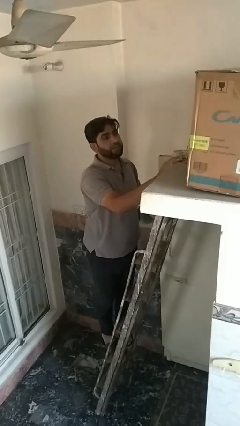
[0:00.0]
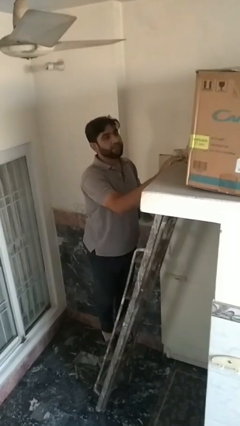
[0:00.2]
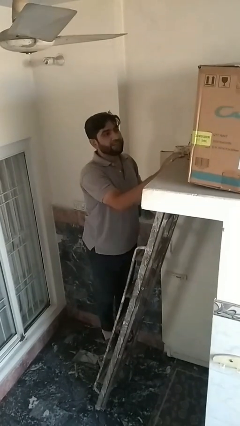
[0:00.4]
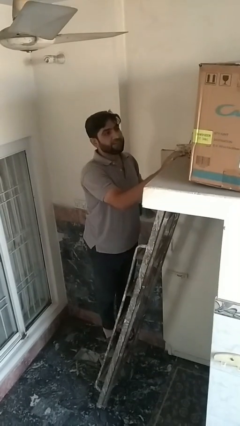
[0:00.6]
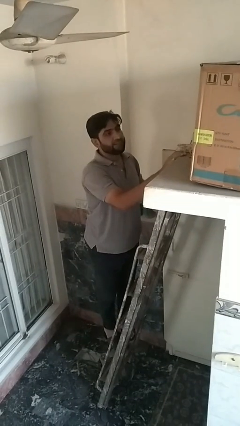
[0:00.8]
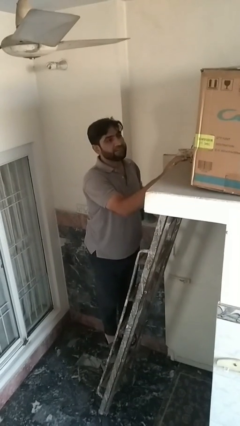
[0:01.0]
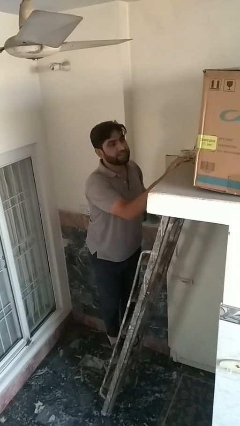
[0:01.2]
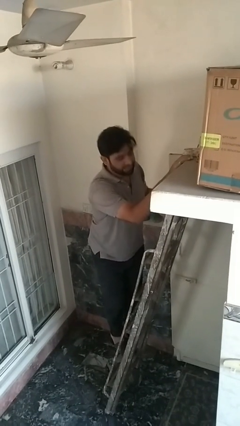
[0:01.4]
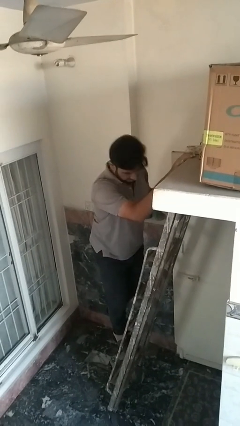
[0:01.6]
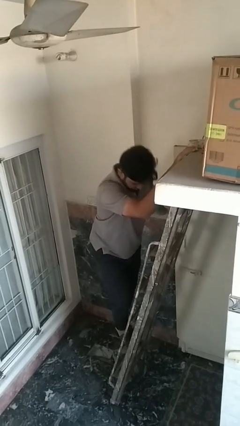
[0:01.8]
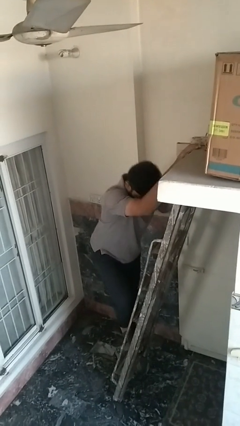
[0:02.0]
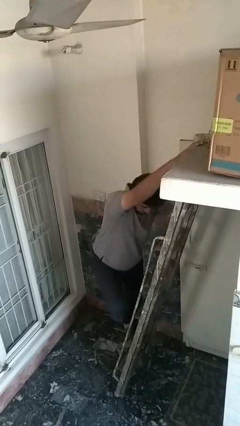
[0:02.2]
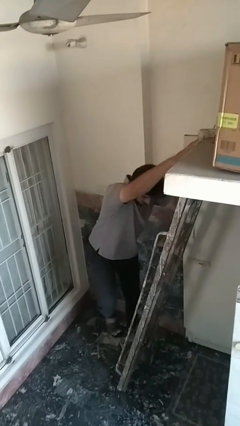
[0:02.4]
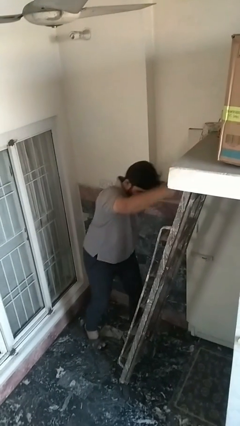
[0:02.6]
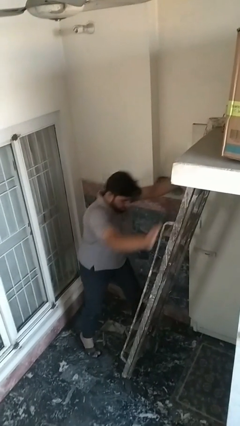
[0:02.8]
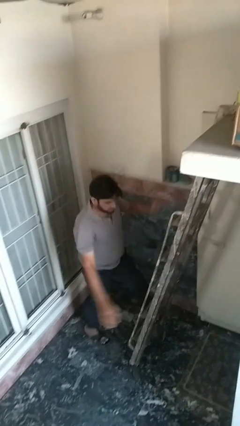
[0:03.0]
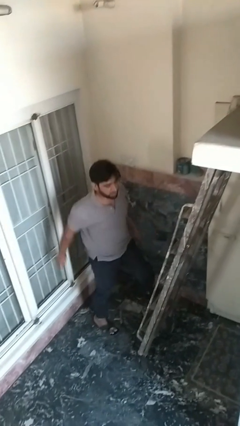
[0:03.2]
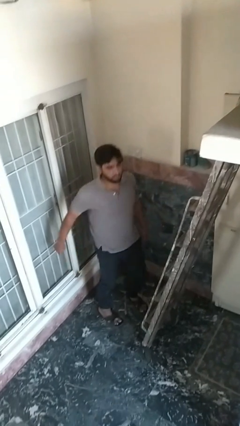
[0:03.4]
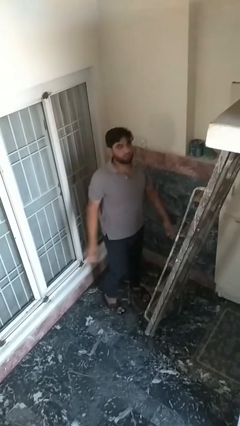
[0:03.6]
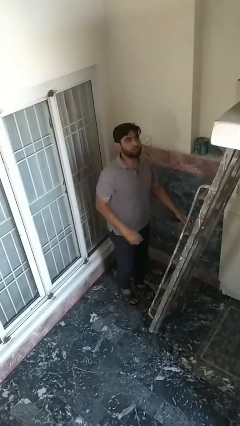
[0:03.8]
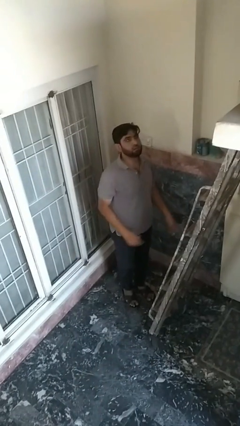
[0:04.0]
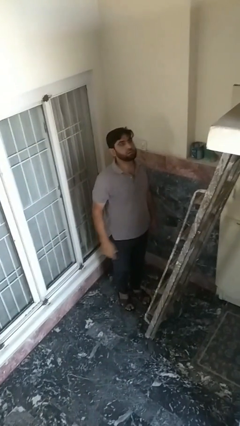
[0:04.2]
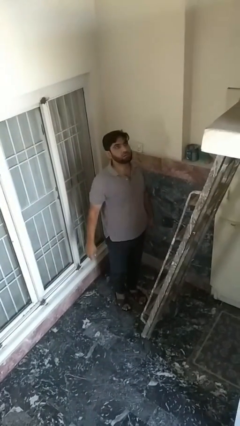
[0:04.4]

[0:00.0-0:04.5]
person climbs down ladder

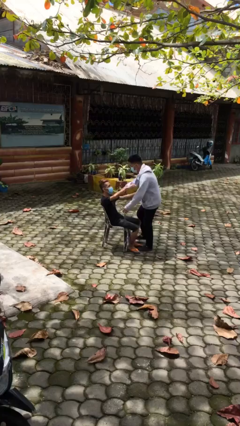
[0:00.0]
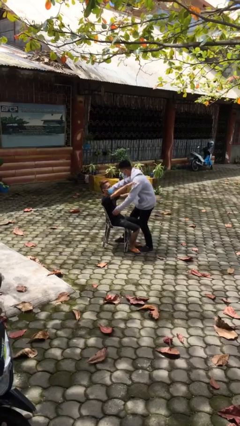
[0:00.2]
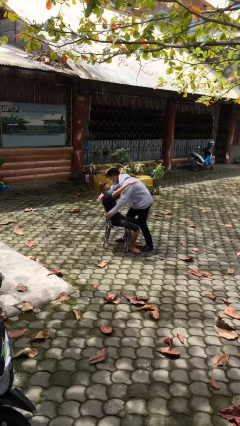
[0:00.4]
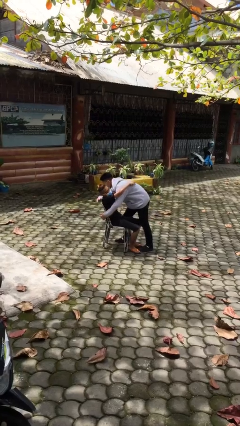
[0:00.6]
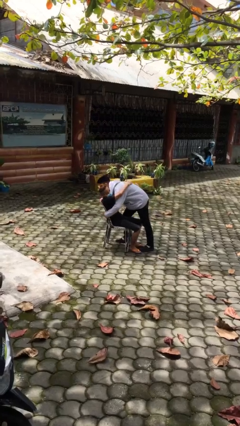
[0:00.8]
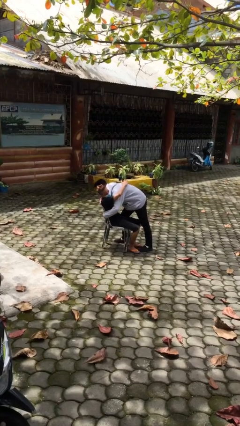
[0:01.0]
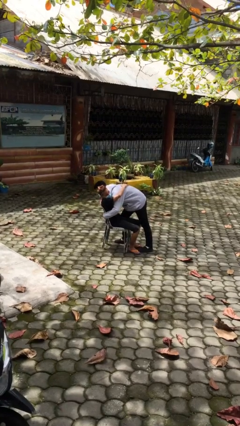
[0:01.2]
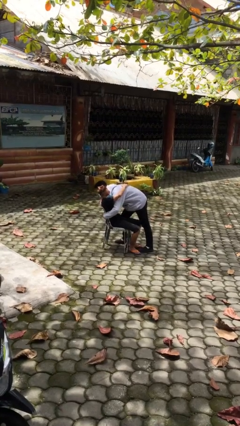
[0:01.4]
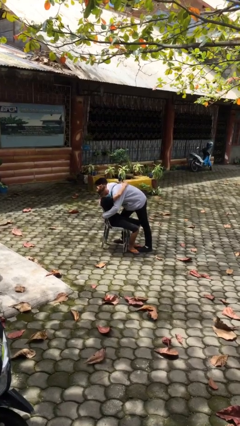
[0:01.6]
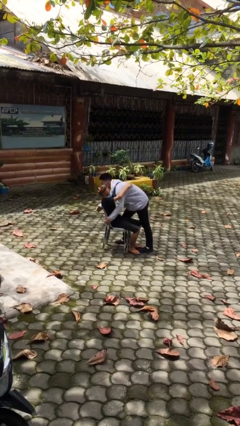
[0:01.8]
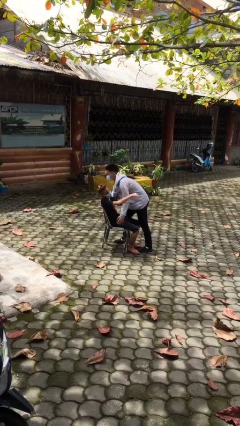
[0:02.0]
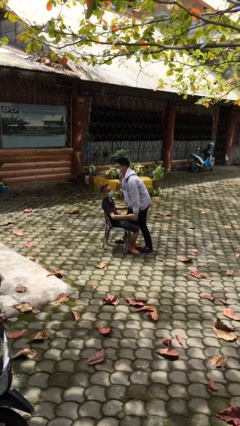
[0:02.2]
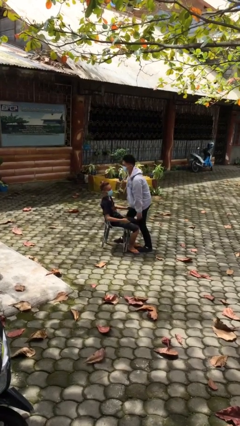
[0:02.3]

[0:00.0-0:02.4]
person embraces person

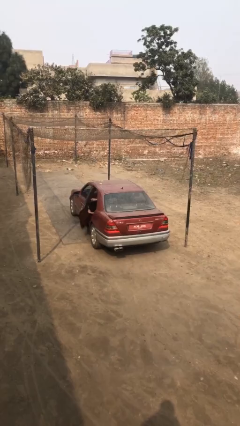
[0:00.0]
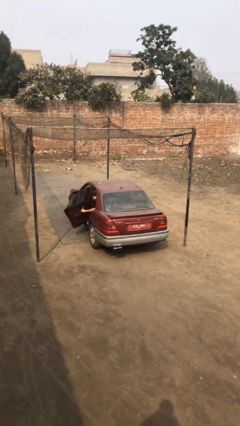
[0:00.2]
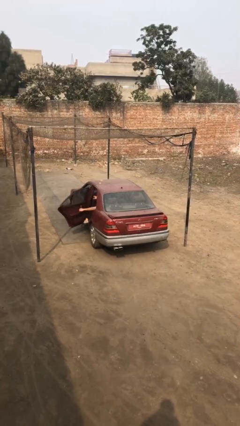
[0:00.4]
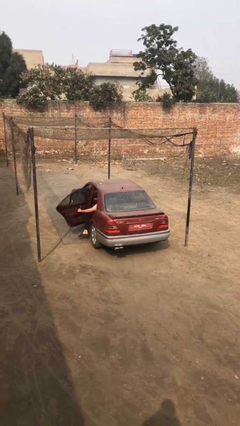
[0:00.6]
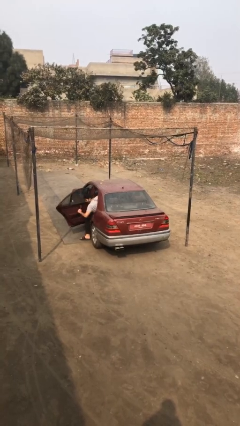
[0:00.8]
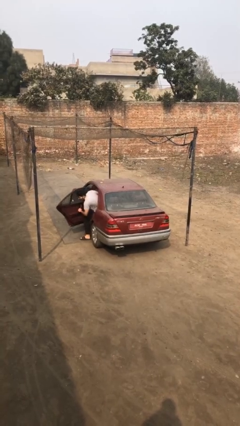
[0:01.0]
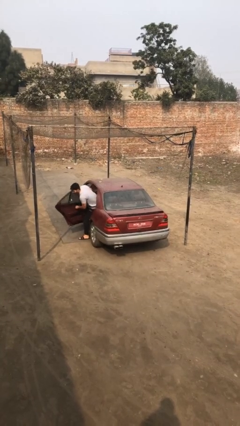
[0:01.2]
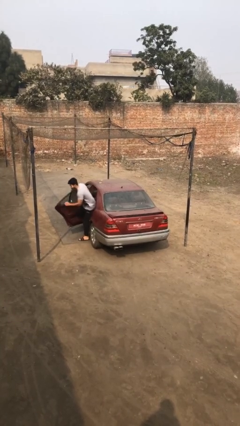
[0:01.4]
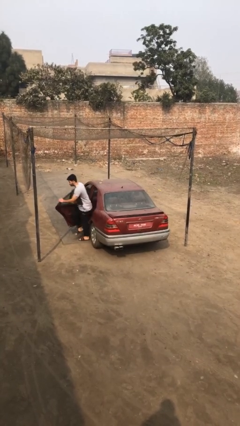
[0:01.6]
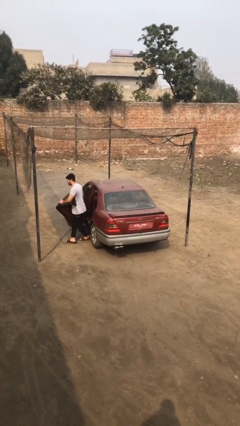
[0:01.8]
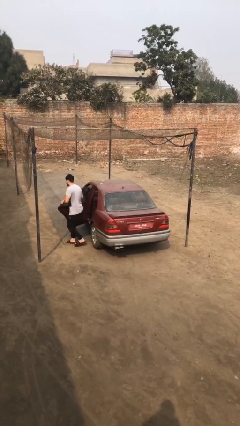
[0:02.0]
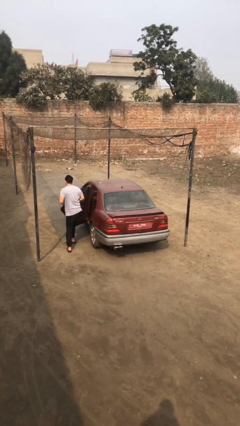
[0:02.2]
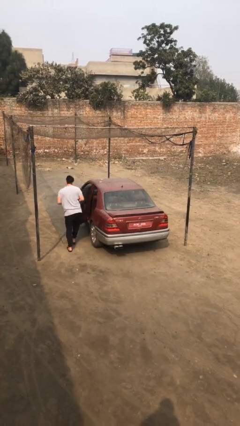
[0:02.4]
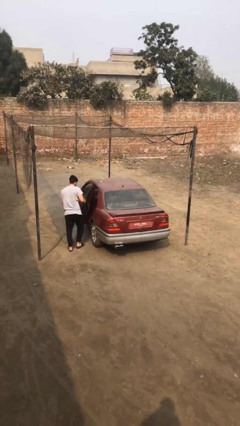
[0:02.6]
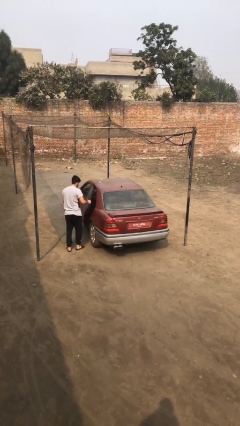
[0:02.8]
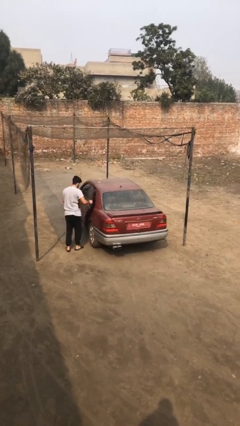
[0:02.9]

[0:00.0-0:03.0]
car drops off person

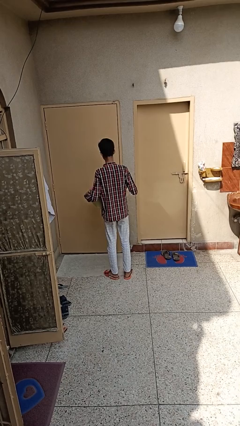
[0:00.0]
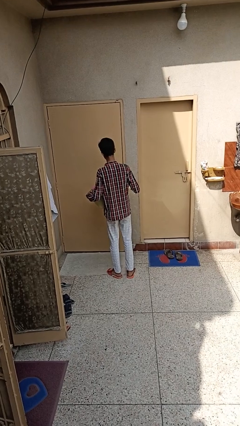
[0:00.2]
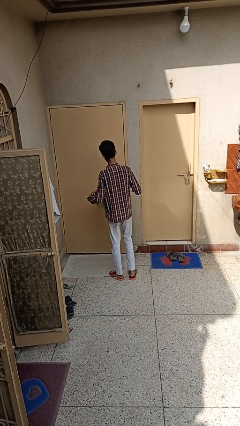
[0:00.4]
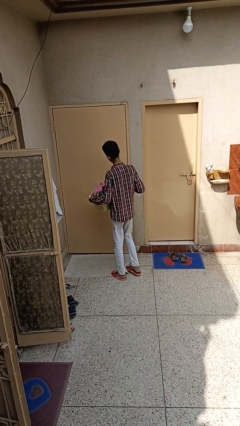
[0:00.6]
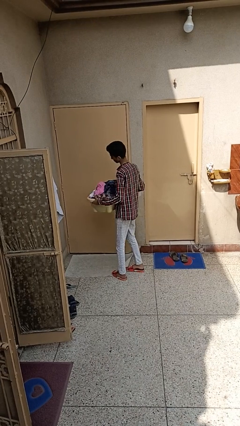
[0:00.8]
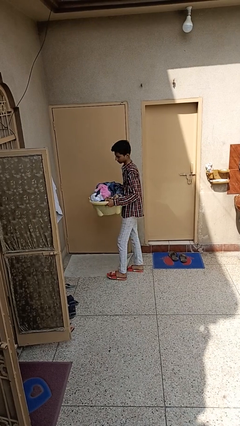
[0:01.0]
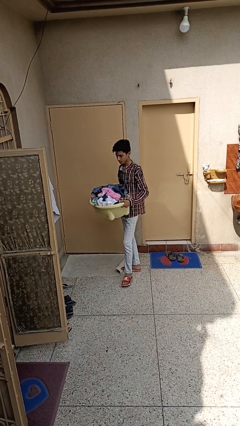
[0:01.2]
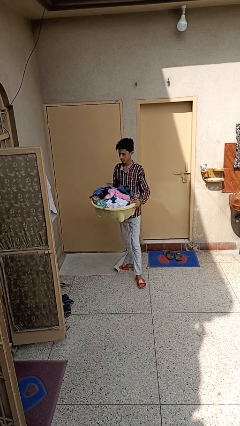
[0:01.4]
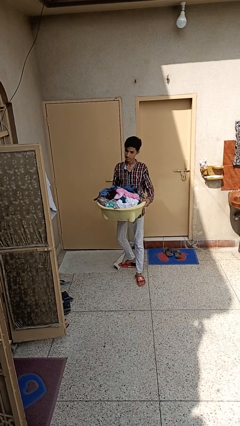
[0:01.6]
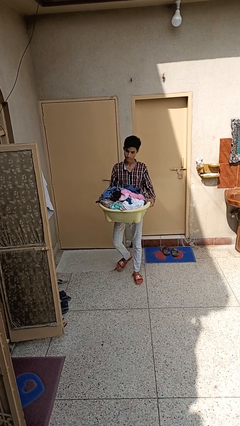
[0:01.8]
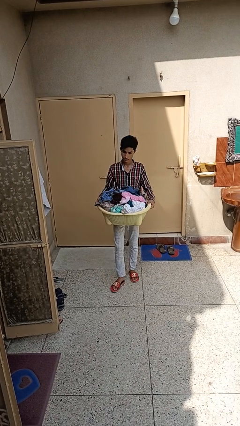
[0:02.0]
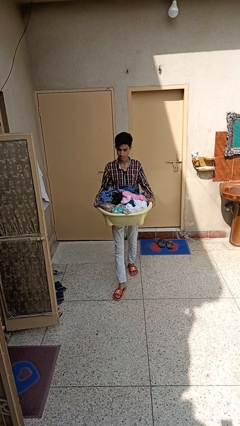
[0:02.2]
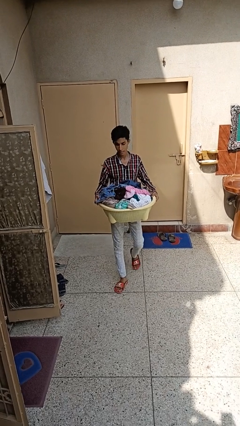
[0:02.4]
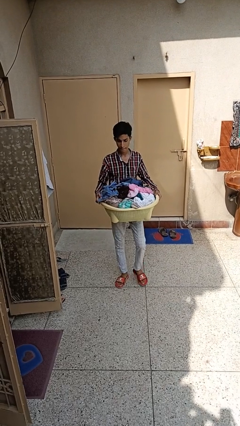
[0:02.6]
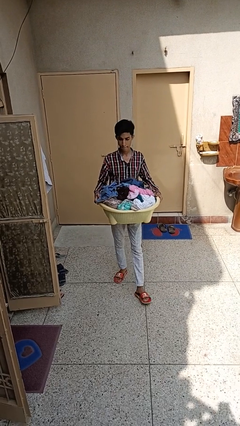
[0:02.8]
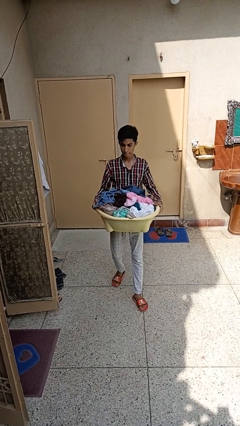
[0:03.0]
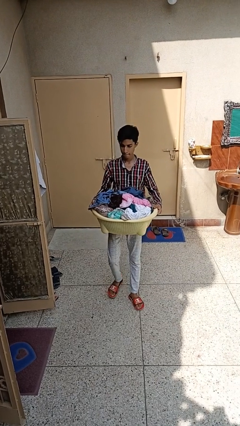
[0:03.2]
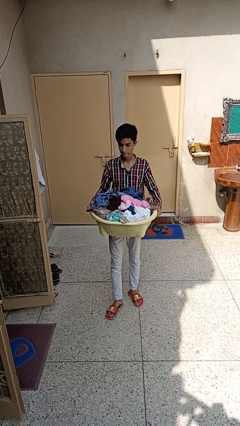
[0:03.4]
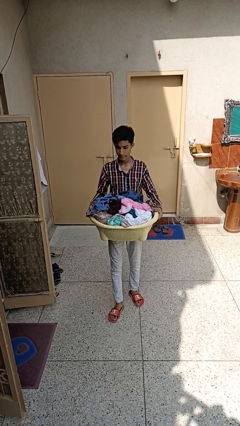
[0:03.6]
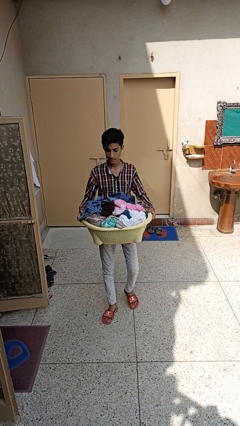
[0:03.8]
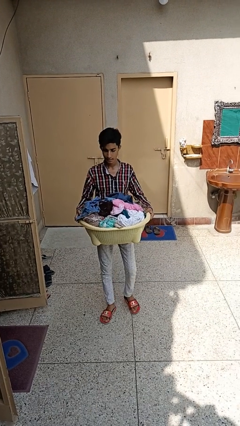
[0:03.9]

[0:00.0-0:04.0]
person carries laundry basket

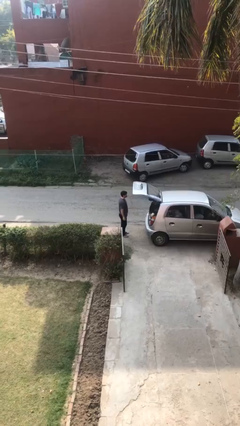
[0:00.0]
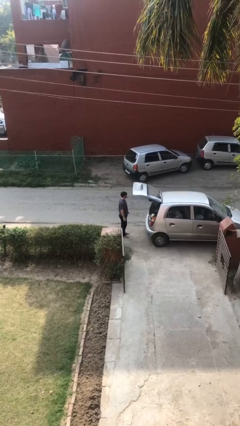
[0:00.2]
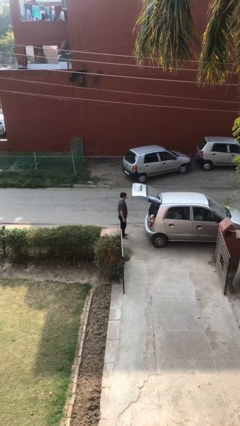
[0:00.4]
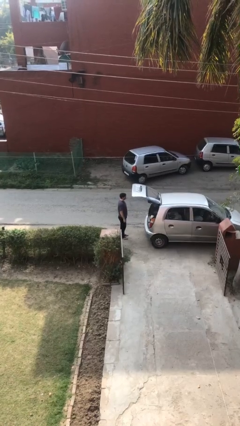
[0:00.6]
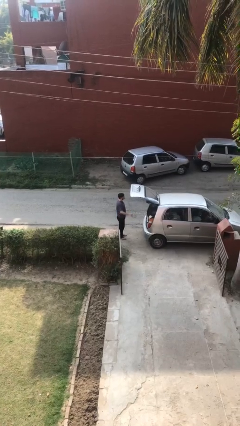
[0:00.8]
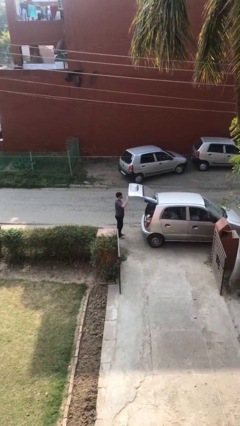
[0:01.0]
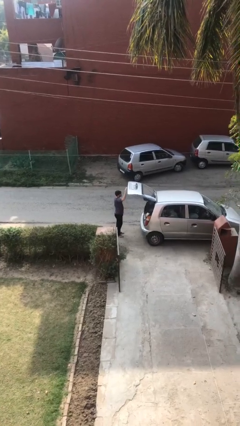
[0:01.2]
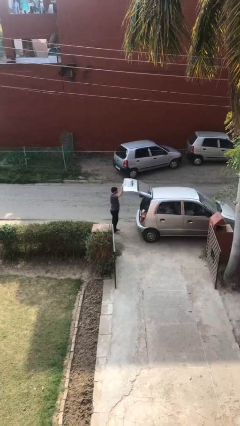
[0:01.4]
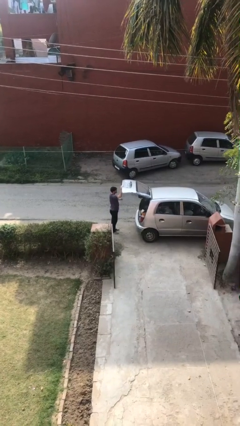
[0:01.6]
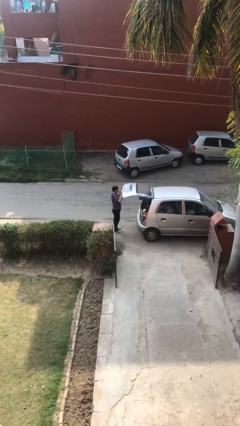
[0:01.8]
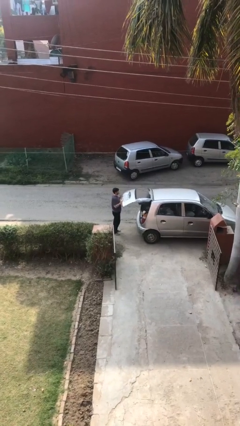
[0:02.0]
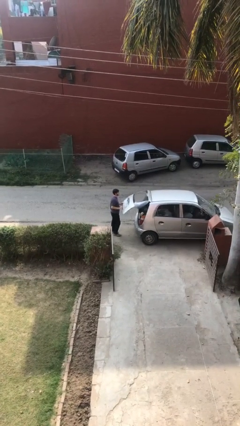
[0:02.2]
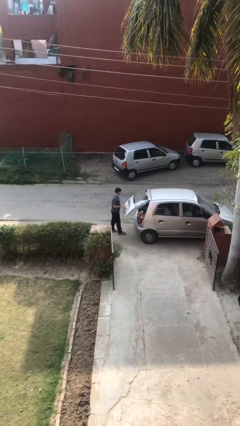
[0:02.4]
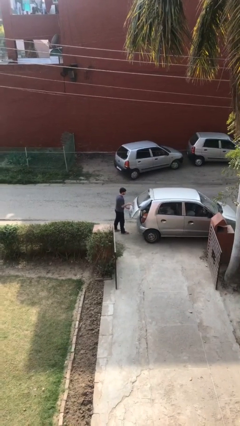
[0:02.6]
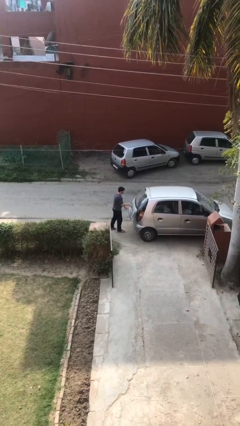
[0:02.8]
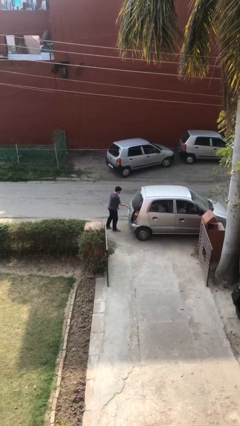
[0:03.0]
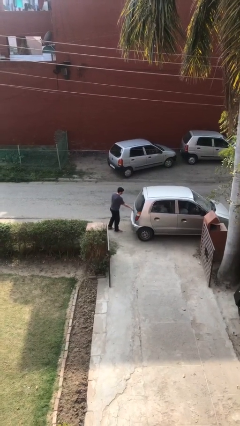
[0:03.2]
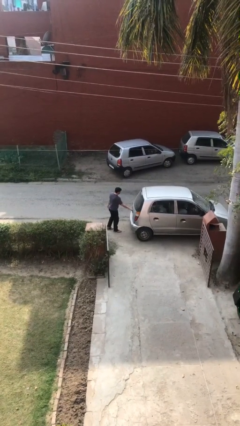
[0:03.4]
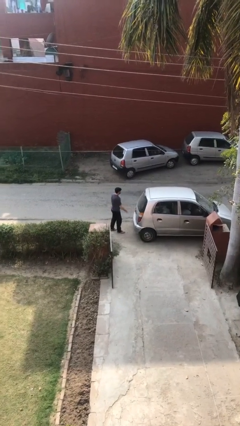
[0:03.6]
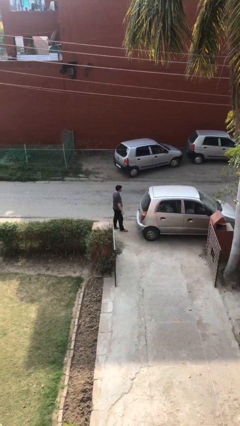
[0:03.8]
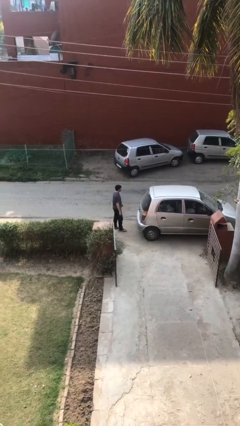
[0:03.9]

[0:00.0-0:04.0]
person closes car trunk
